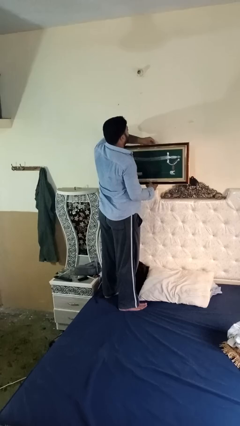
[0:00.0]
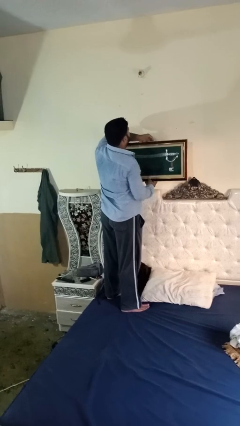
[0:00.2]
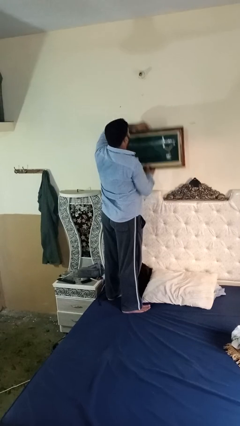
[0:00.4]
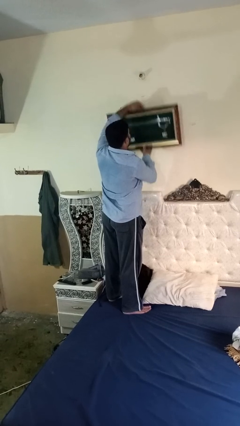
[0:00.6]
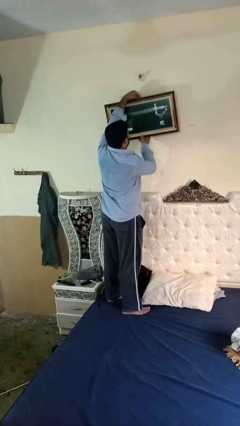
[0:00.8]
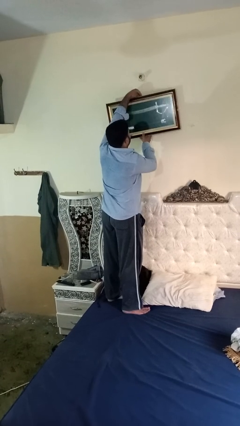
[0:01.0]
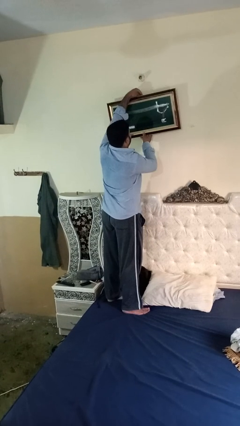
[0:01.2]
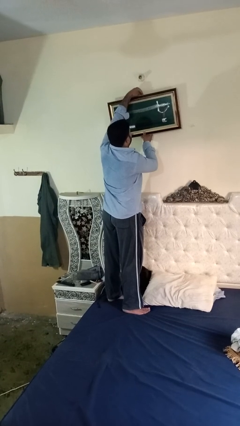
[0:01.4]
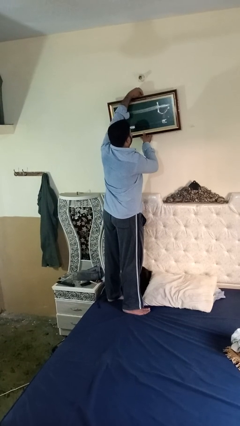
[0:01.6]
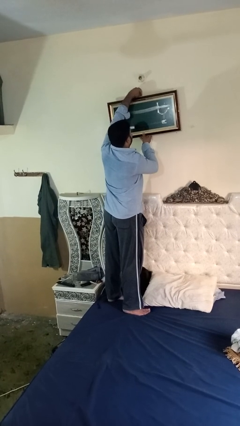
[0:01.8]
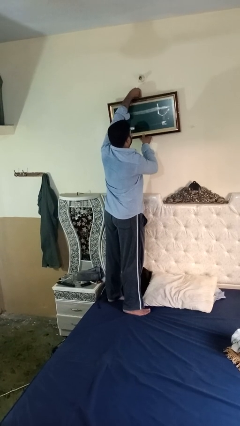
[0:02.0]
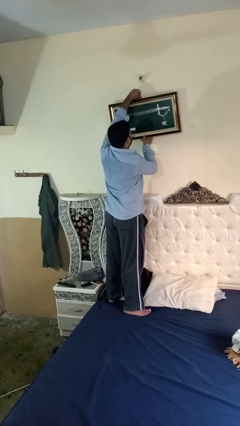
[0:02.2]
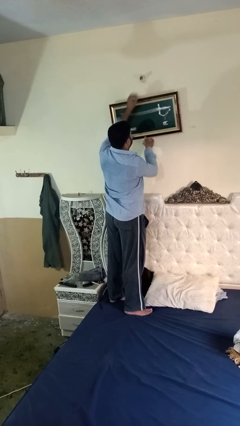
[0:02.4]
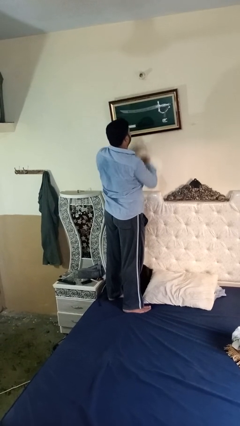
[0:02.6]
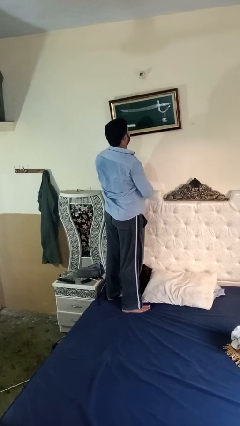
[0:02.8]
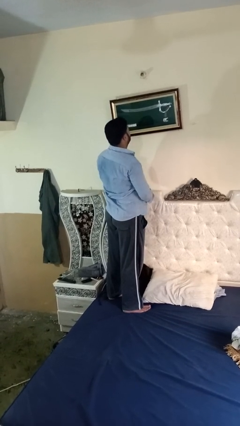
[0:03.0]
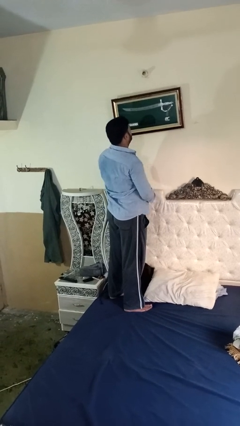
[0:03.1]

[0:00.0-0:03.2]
person puts up picture frame

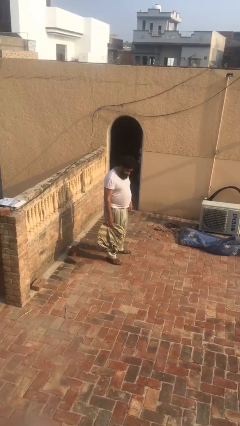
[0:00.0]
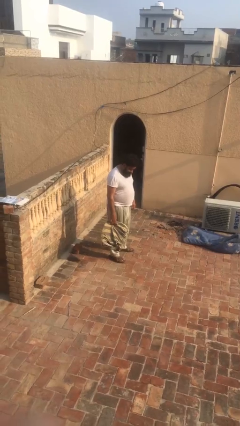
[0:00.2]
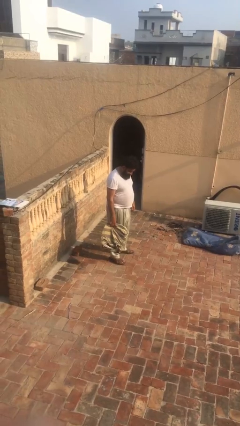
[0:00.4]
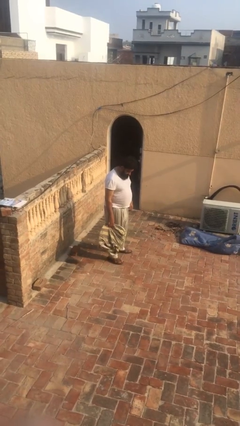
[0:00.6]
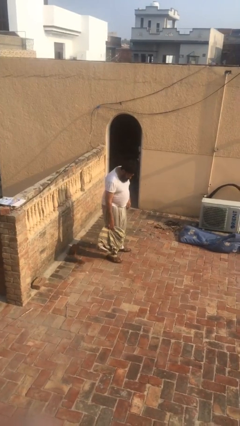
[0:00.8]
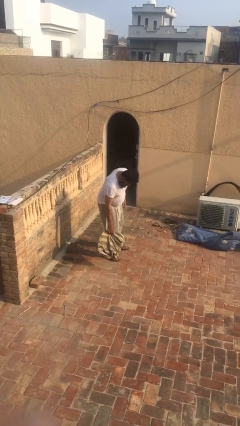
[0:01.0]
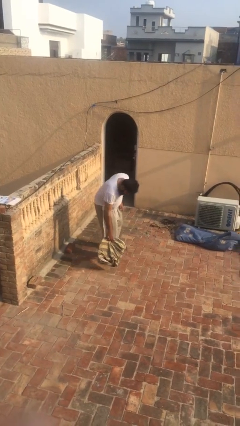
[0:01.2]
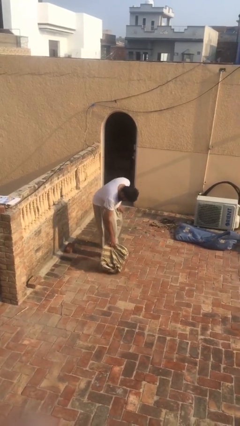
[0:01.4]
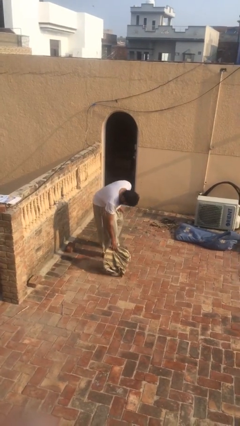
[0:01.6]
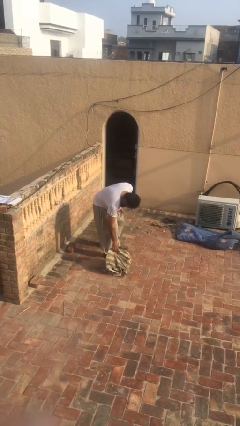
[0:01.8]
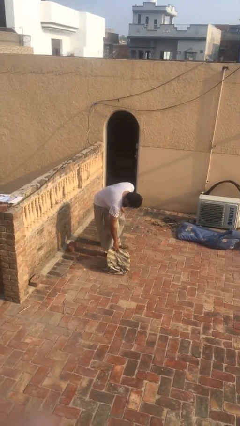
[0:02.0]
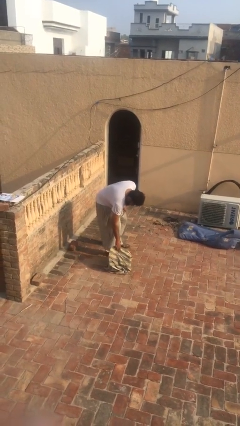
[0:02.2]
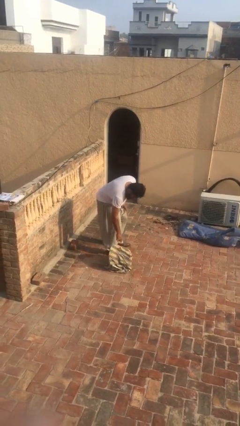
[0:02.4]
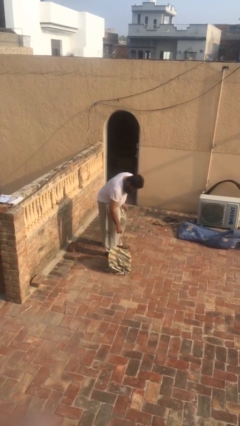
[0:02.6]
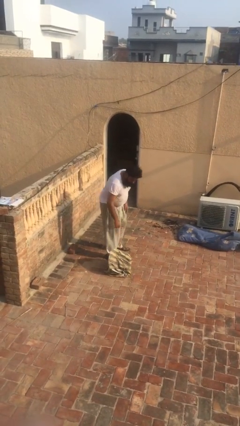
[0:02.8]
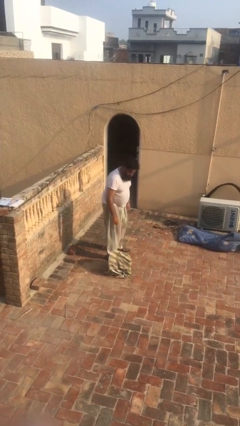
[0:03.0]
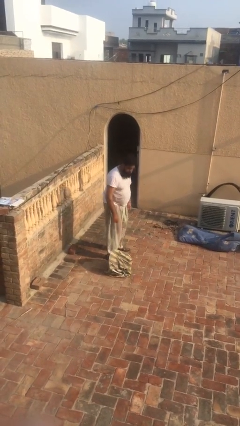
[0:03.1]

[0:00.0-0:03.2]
person puts down object on floor

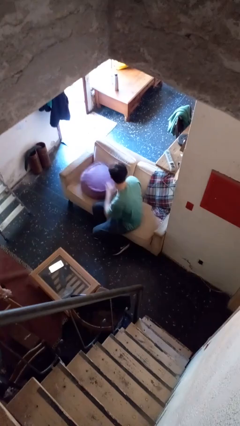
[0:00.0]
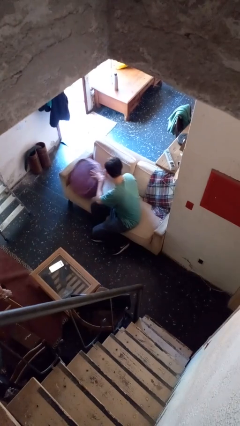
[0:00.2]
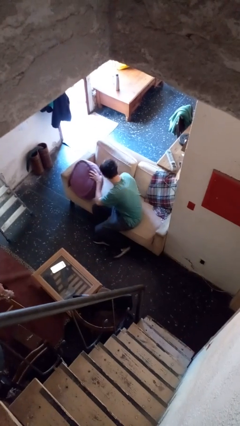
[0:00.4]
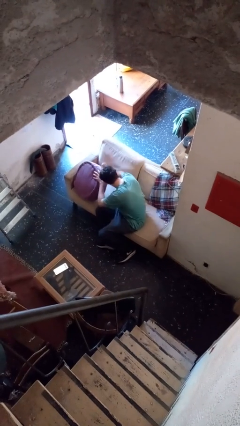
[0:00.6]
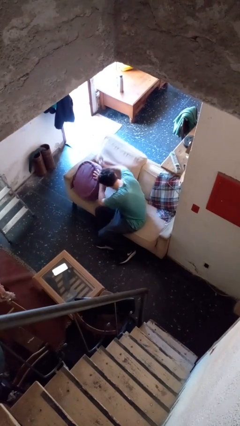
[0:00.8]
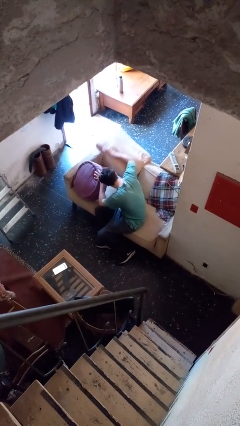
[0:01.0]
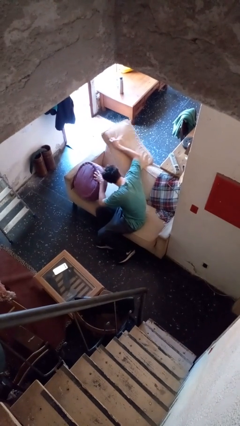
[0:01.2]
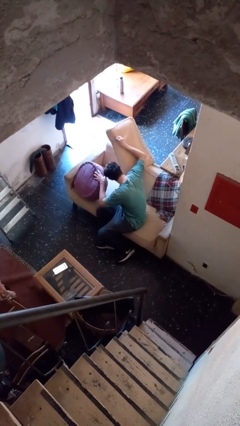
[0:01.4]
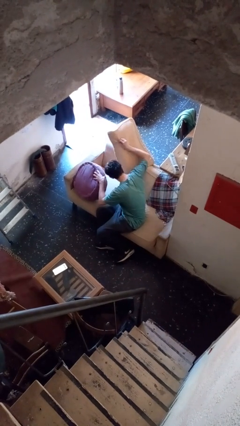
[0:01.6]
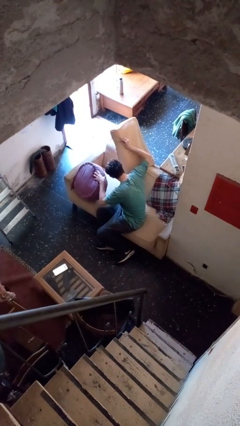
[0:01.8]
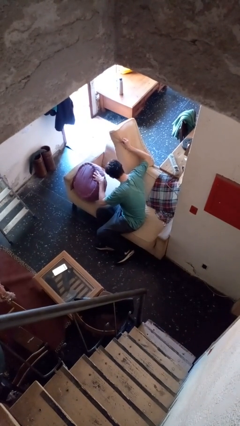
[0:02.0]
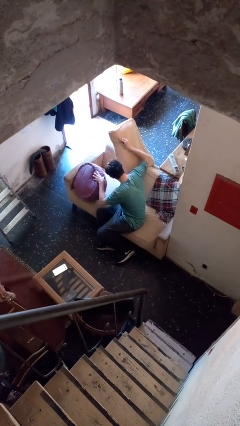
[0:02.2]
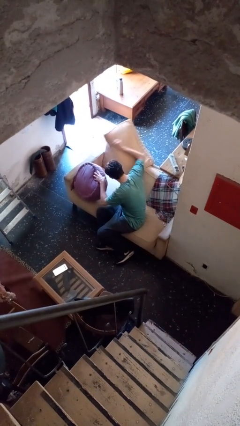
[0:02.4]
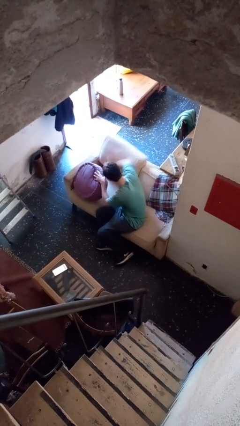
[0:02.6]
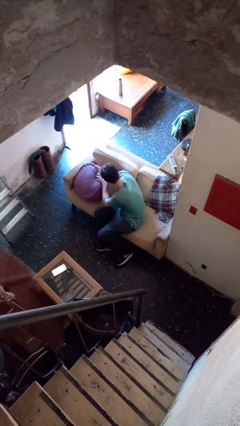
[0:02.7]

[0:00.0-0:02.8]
person searches in couch

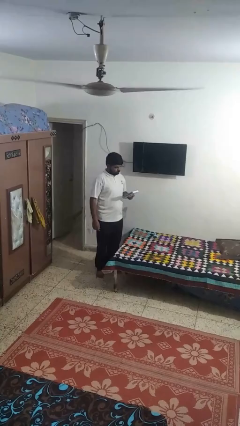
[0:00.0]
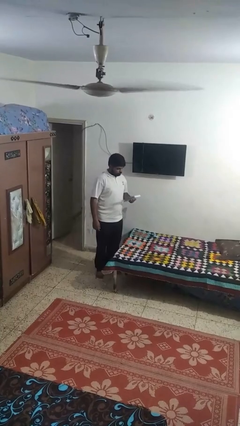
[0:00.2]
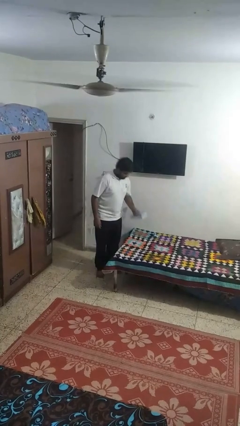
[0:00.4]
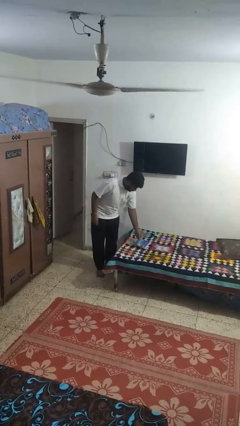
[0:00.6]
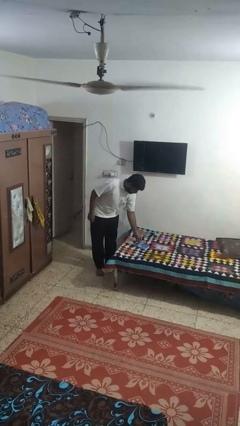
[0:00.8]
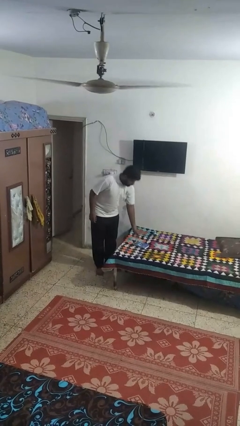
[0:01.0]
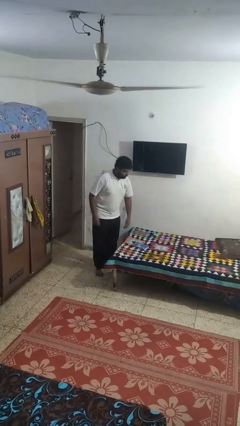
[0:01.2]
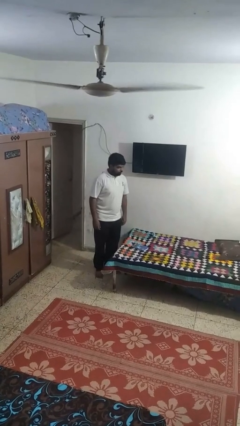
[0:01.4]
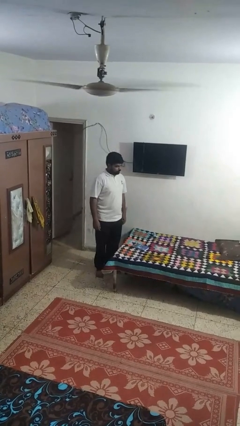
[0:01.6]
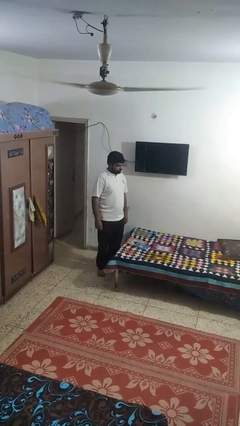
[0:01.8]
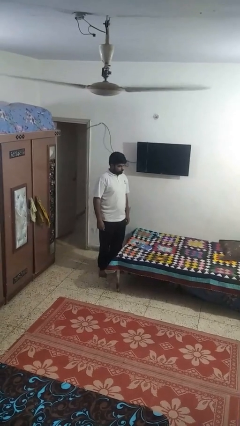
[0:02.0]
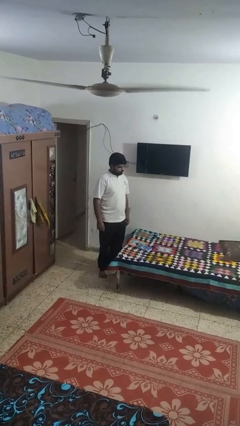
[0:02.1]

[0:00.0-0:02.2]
person puts down object on bed

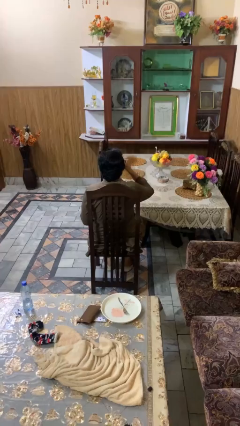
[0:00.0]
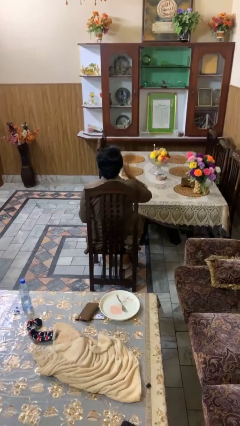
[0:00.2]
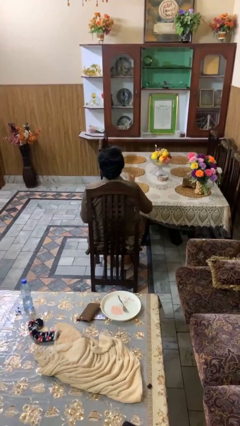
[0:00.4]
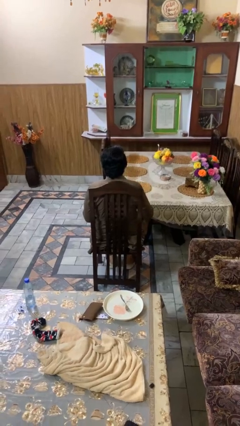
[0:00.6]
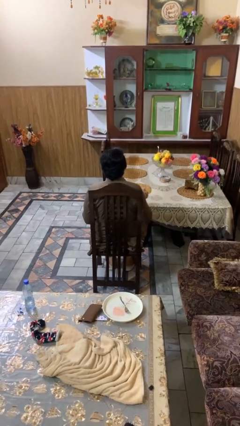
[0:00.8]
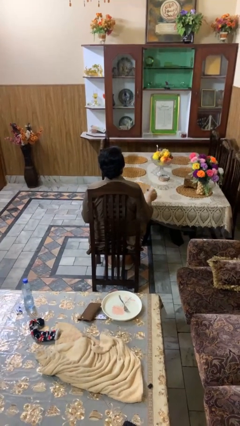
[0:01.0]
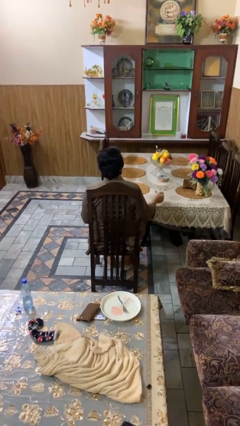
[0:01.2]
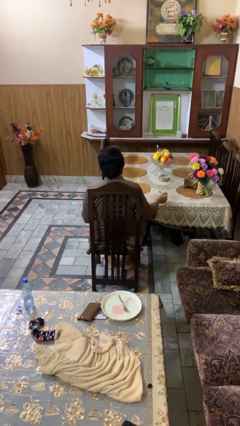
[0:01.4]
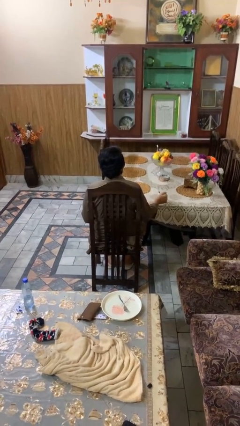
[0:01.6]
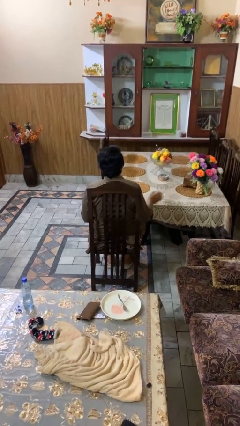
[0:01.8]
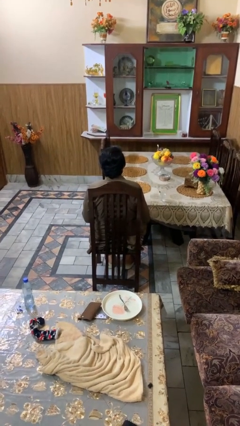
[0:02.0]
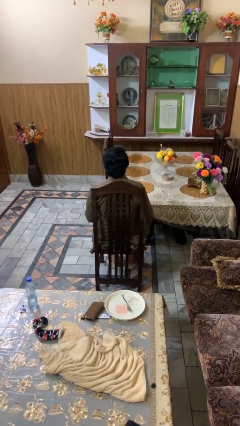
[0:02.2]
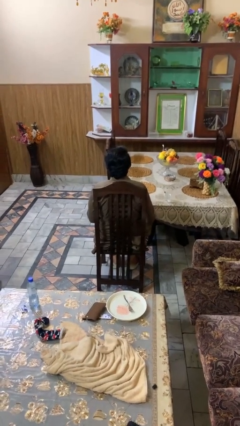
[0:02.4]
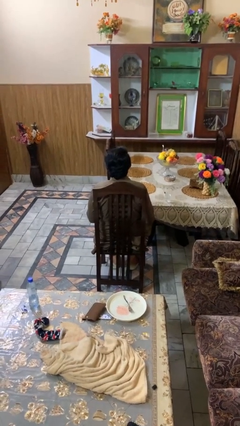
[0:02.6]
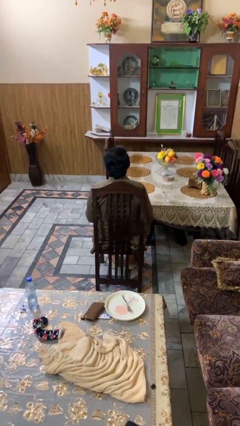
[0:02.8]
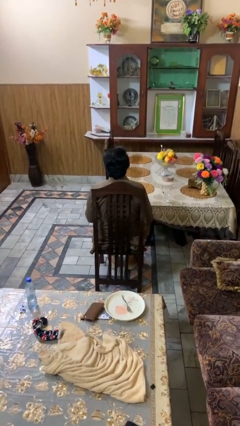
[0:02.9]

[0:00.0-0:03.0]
person puts down object on table

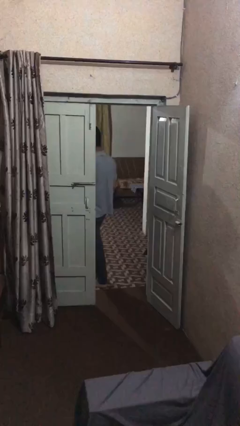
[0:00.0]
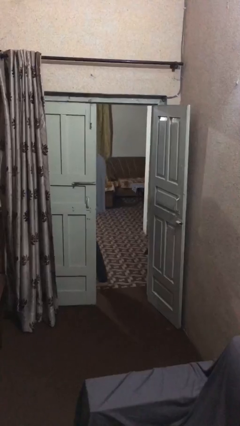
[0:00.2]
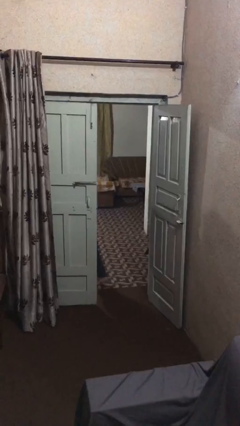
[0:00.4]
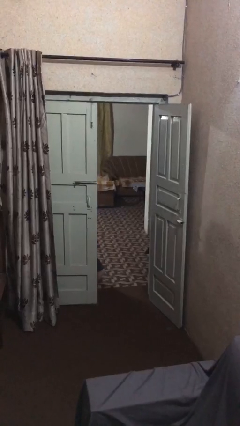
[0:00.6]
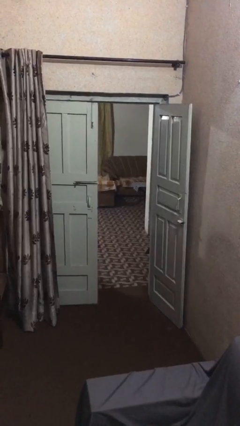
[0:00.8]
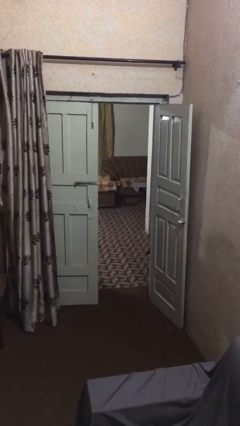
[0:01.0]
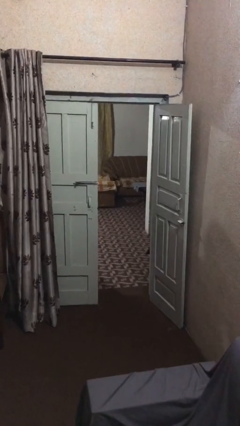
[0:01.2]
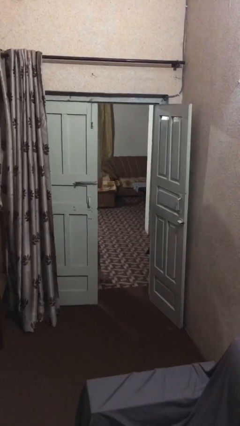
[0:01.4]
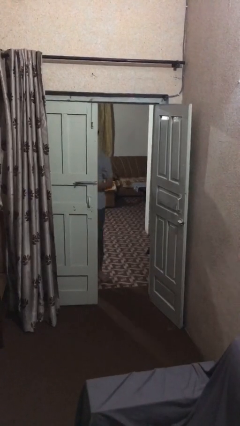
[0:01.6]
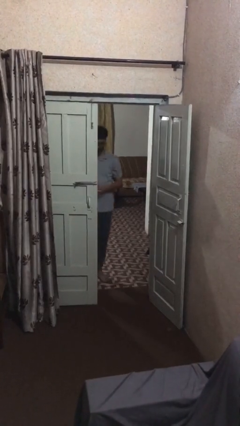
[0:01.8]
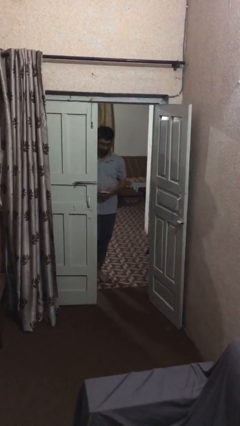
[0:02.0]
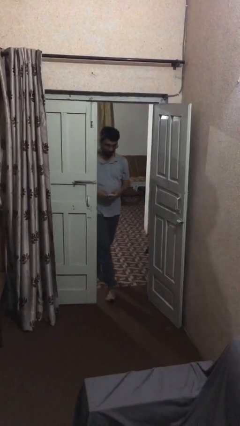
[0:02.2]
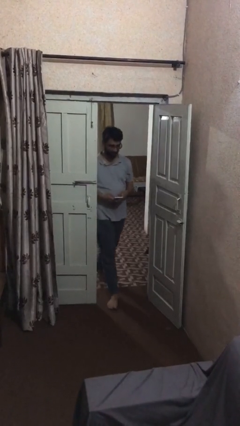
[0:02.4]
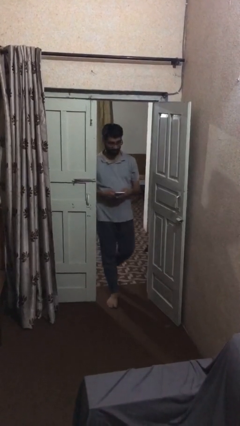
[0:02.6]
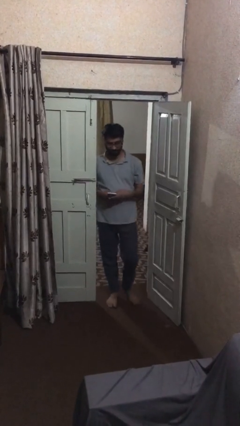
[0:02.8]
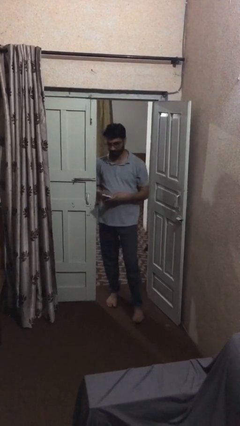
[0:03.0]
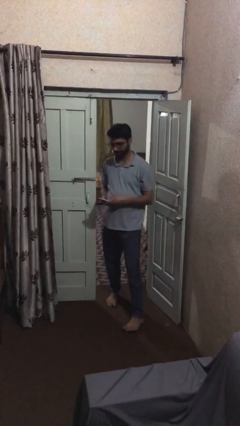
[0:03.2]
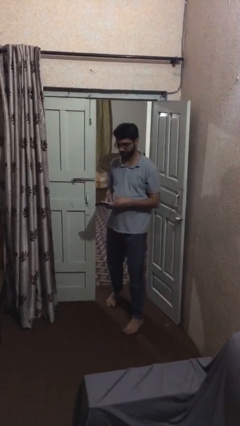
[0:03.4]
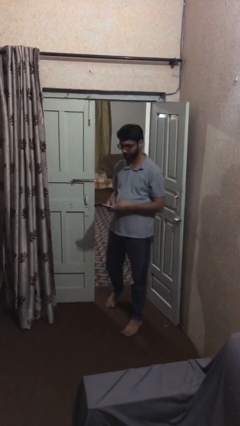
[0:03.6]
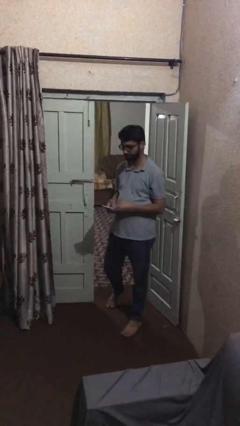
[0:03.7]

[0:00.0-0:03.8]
person enters scene through structure
